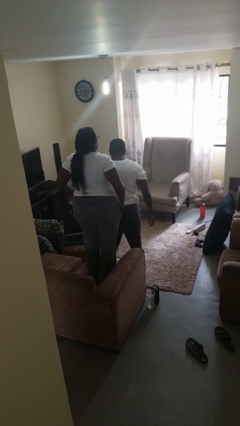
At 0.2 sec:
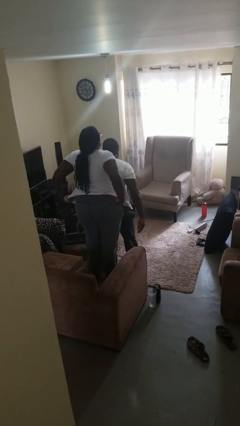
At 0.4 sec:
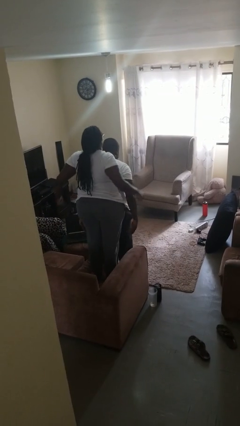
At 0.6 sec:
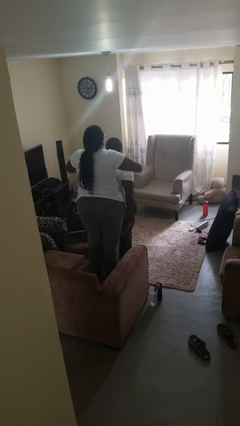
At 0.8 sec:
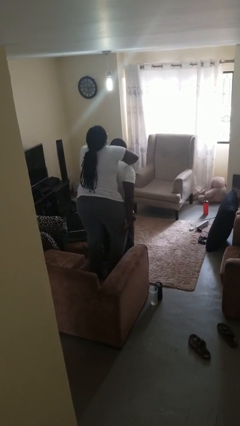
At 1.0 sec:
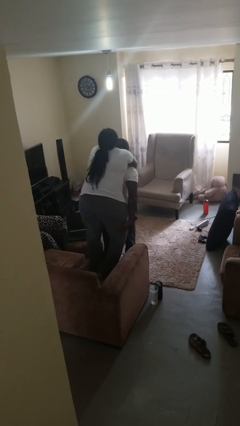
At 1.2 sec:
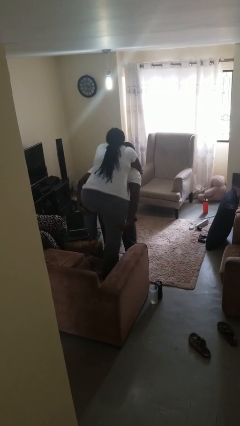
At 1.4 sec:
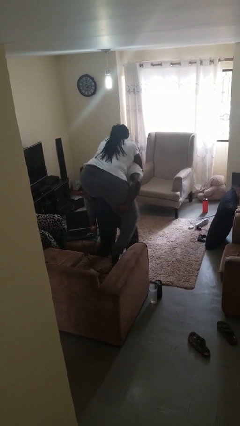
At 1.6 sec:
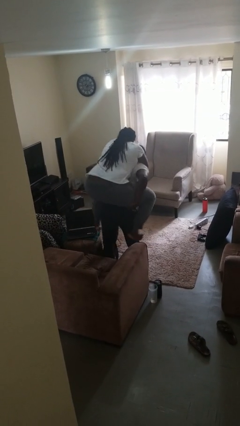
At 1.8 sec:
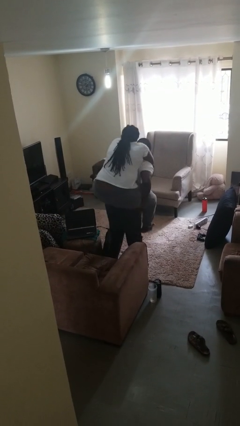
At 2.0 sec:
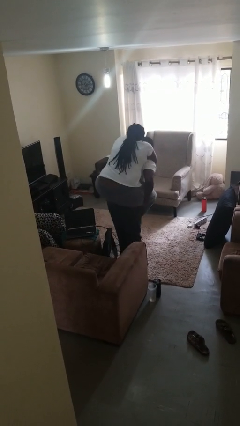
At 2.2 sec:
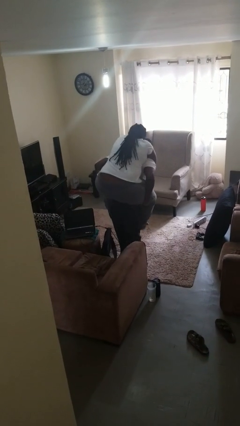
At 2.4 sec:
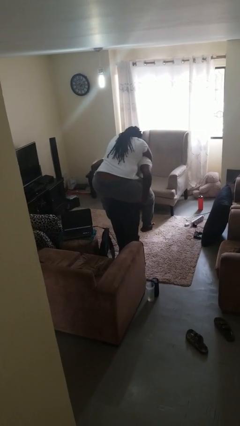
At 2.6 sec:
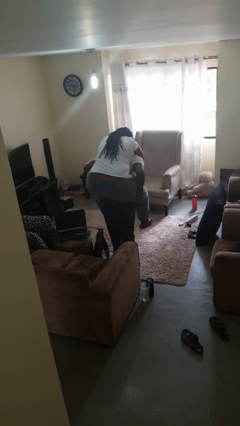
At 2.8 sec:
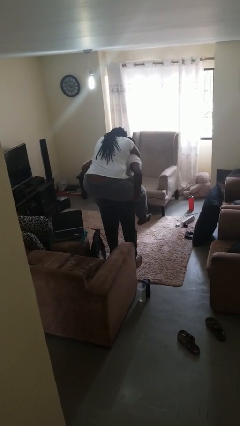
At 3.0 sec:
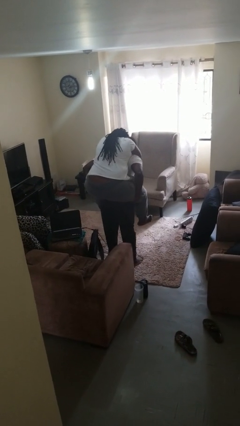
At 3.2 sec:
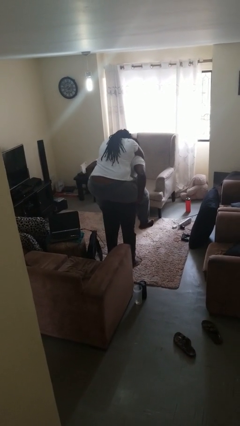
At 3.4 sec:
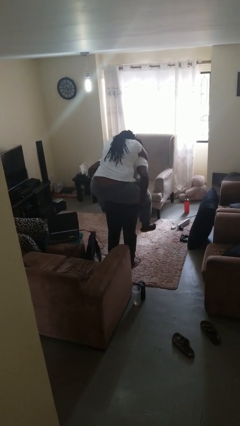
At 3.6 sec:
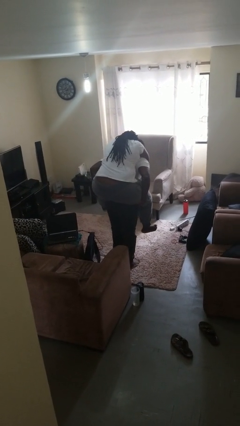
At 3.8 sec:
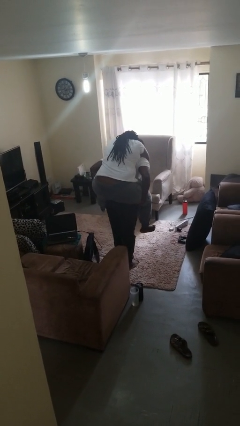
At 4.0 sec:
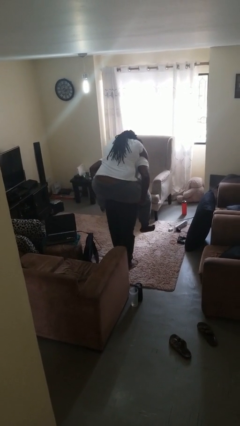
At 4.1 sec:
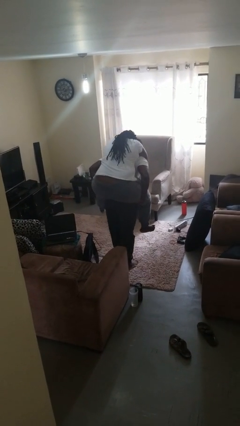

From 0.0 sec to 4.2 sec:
person carries person on back

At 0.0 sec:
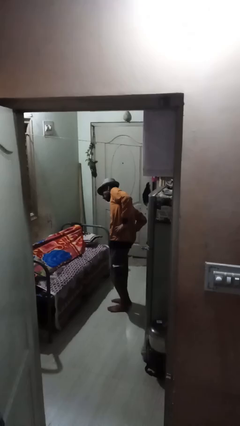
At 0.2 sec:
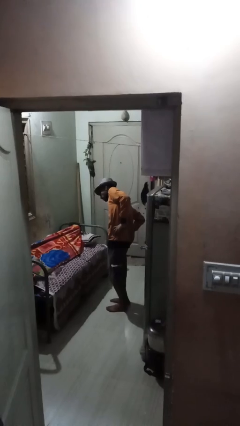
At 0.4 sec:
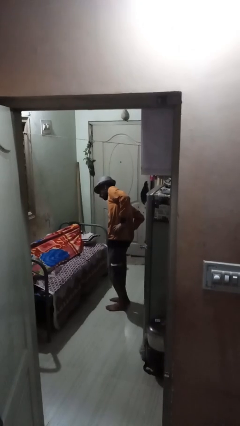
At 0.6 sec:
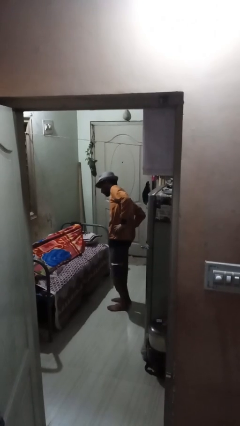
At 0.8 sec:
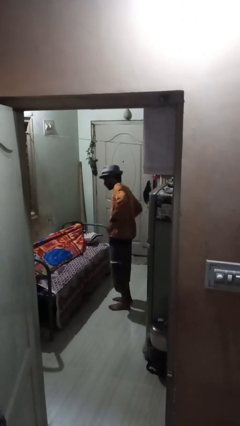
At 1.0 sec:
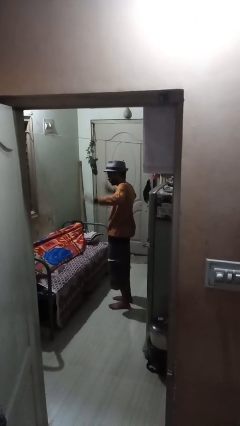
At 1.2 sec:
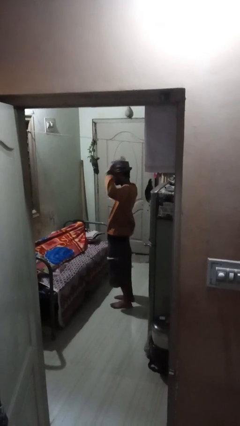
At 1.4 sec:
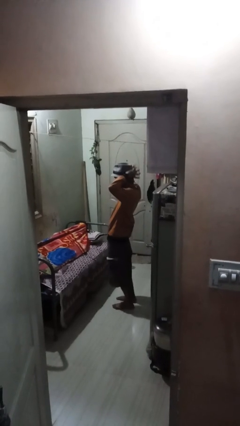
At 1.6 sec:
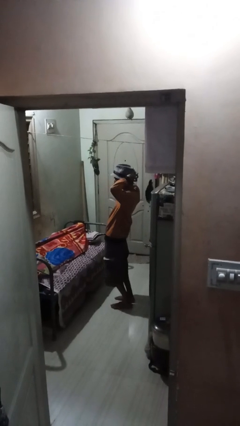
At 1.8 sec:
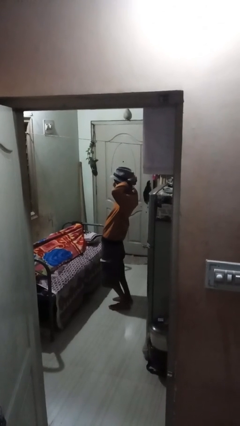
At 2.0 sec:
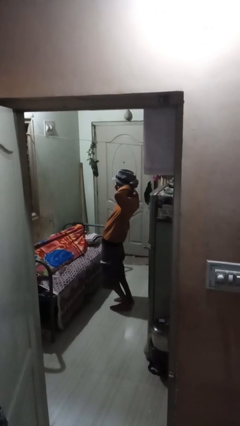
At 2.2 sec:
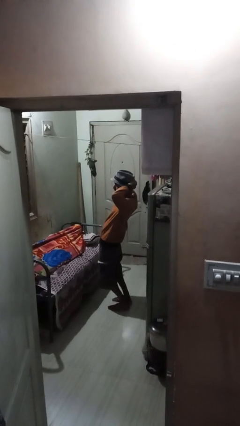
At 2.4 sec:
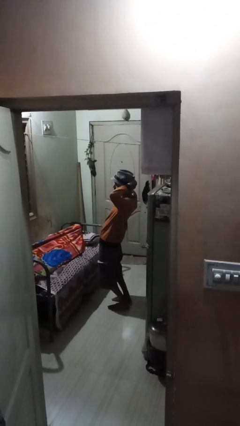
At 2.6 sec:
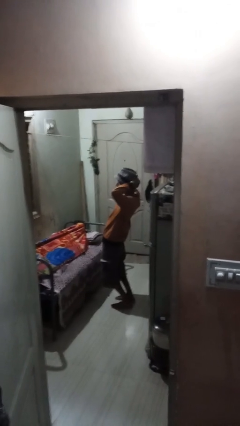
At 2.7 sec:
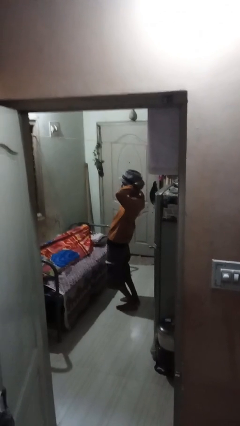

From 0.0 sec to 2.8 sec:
person stretches arms over head

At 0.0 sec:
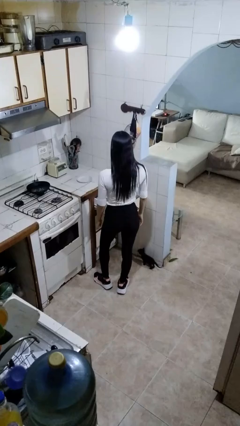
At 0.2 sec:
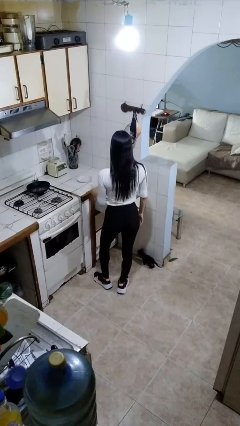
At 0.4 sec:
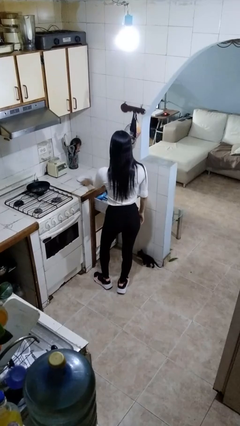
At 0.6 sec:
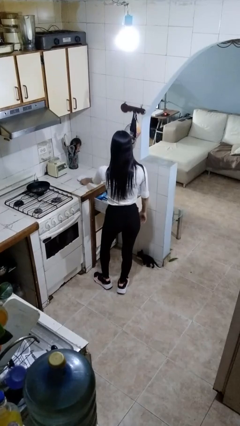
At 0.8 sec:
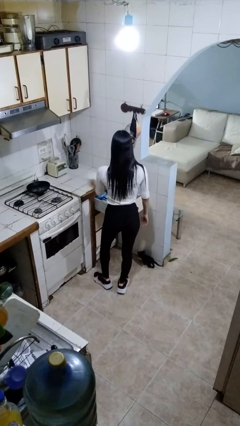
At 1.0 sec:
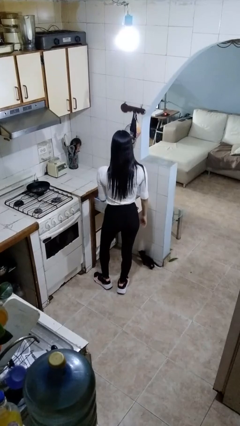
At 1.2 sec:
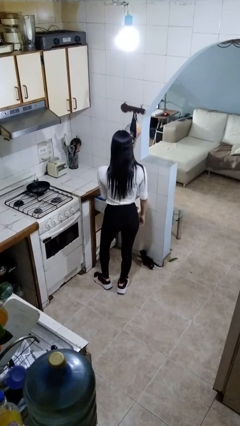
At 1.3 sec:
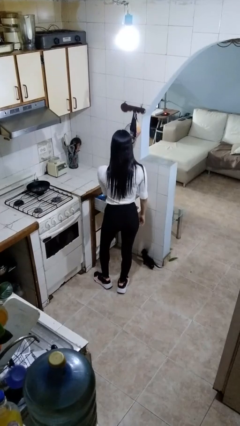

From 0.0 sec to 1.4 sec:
person puts object into kitchen drawer

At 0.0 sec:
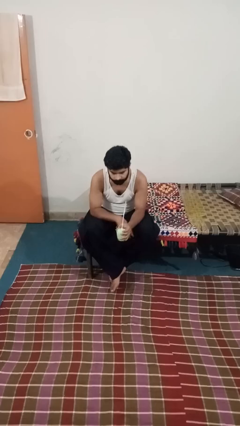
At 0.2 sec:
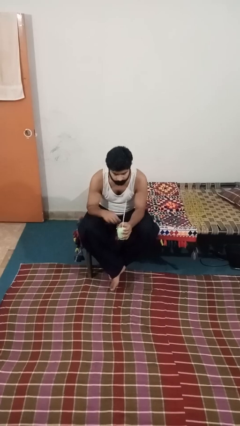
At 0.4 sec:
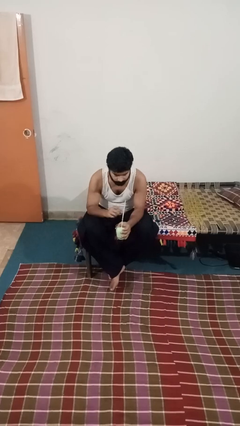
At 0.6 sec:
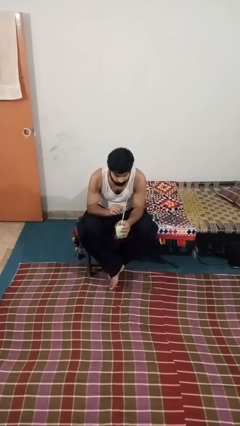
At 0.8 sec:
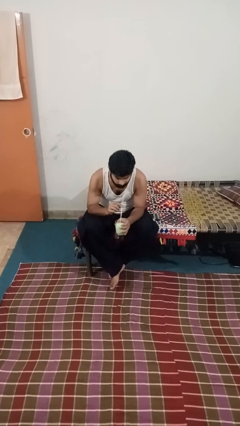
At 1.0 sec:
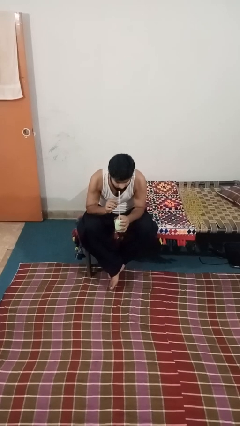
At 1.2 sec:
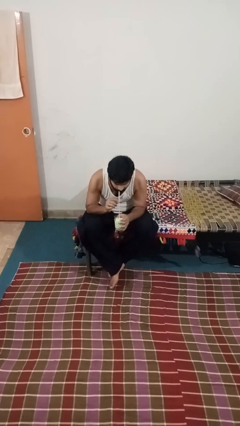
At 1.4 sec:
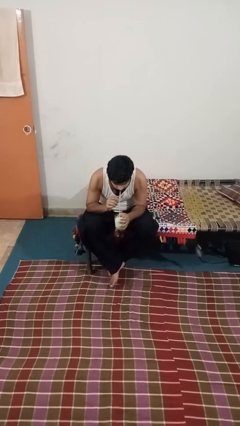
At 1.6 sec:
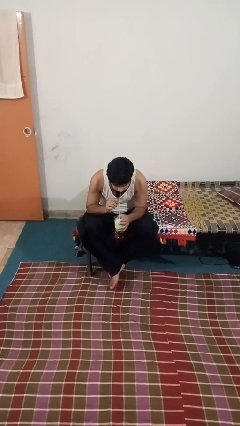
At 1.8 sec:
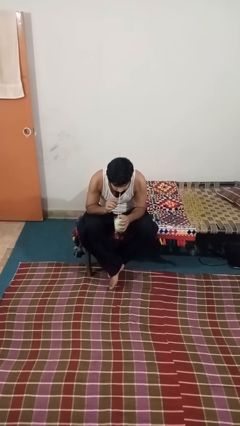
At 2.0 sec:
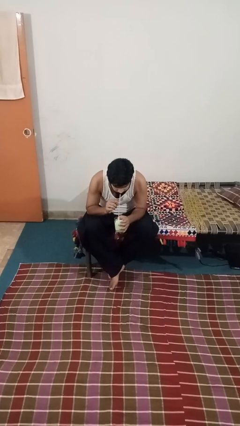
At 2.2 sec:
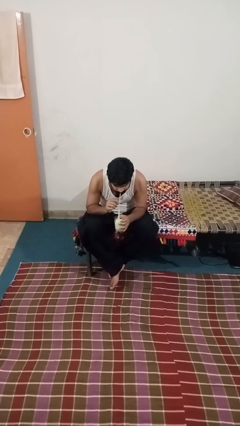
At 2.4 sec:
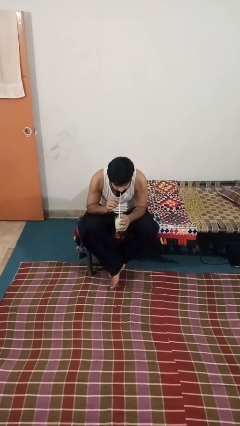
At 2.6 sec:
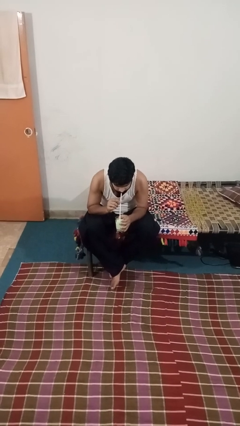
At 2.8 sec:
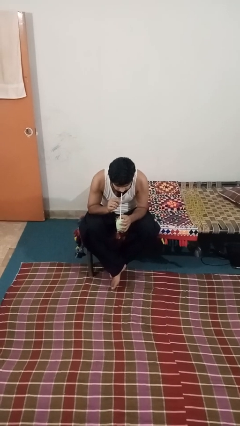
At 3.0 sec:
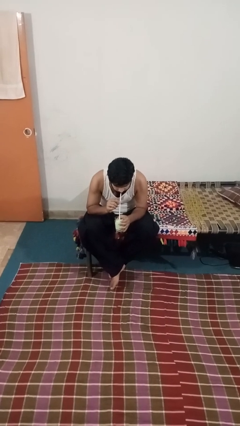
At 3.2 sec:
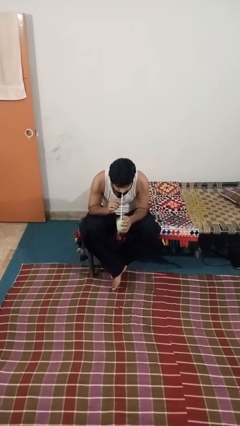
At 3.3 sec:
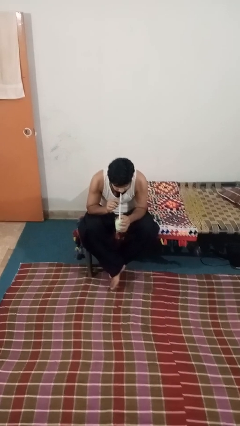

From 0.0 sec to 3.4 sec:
person drinks from straw

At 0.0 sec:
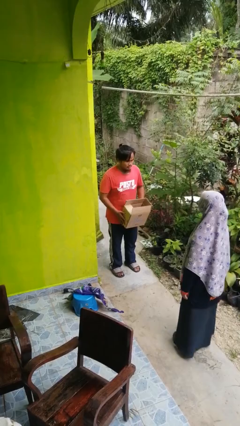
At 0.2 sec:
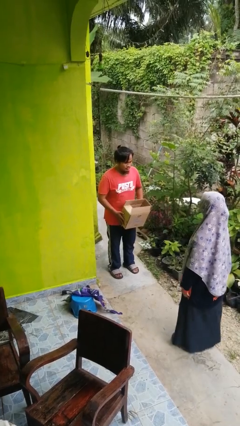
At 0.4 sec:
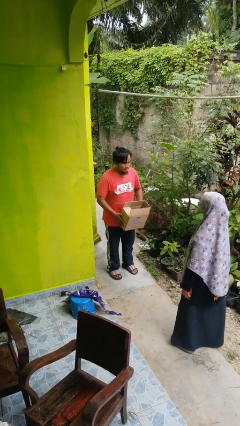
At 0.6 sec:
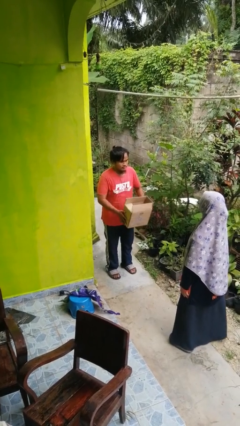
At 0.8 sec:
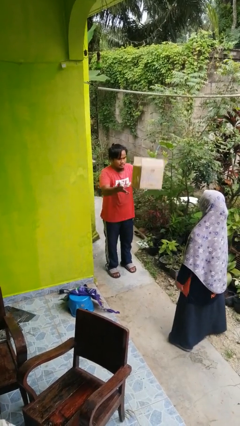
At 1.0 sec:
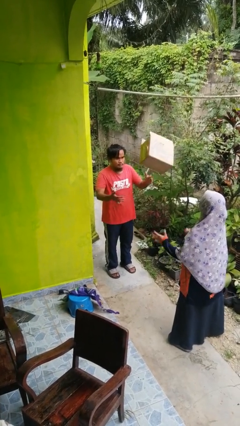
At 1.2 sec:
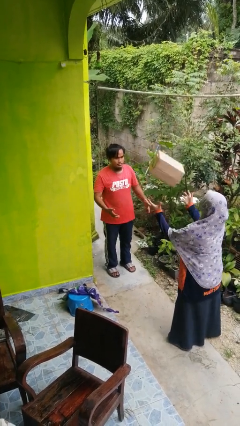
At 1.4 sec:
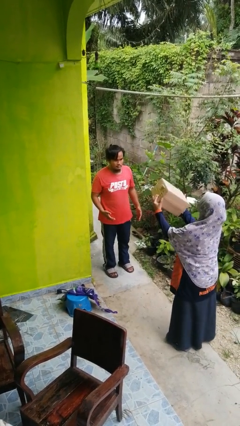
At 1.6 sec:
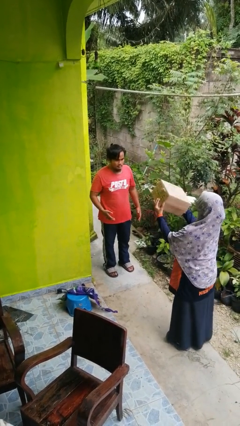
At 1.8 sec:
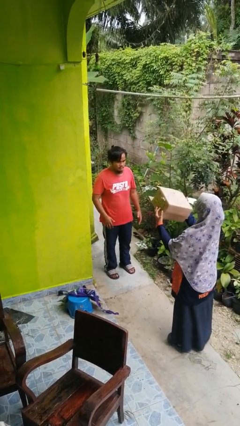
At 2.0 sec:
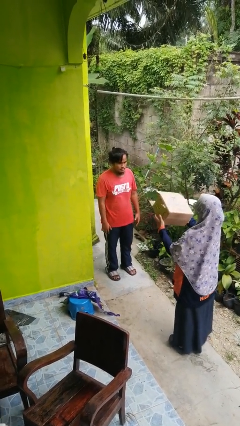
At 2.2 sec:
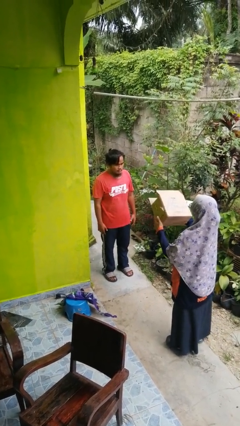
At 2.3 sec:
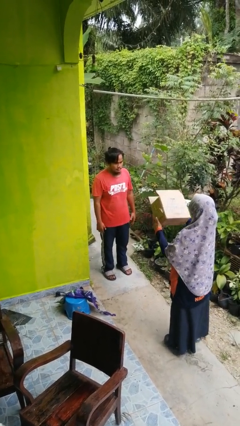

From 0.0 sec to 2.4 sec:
person throws object to person

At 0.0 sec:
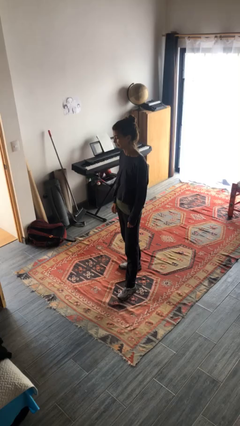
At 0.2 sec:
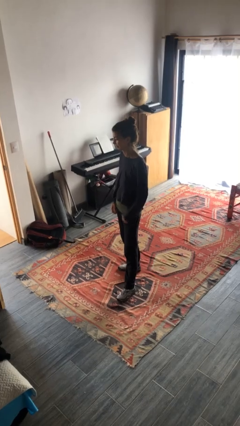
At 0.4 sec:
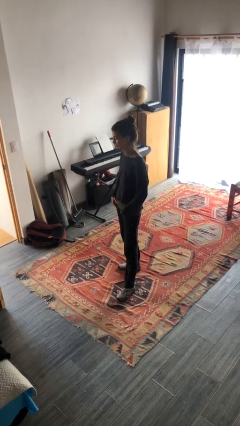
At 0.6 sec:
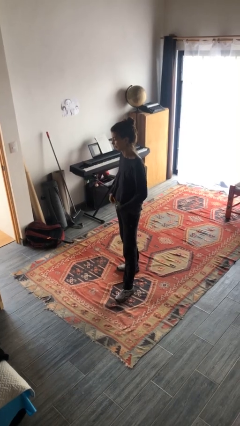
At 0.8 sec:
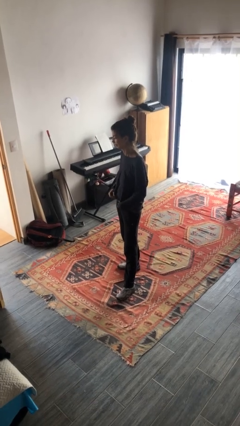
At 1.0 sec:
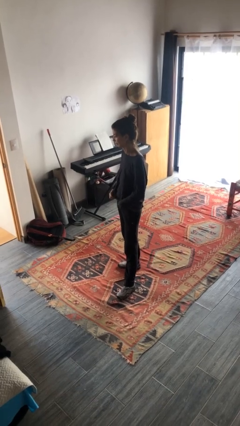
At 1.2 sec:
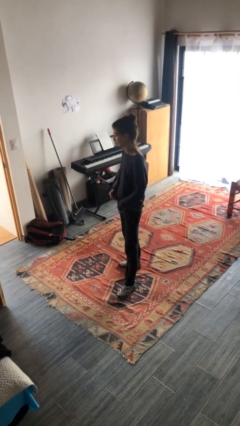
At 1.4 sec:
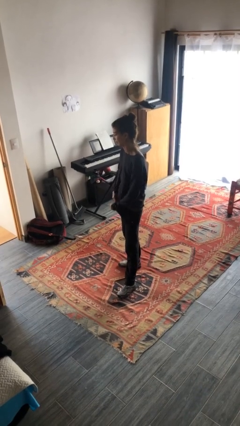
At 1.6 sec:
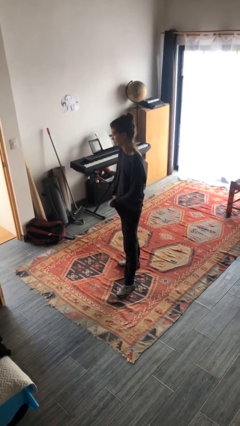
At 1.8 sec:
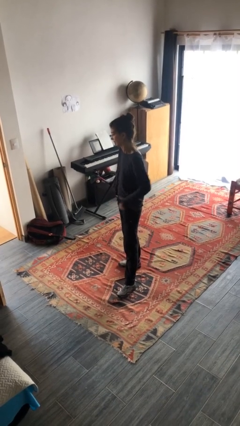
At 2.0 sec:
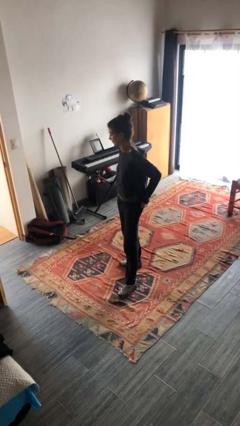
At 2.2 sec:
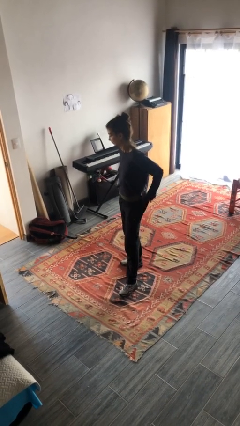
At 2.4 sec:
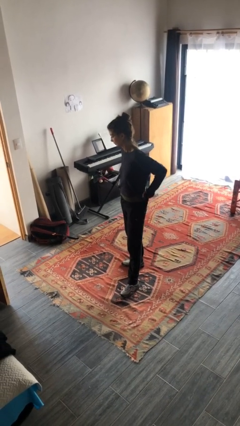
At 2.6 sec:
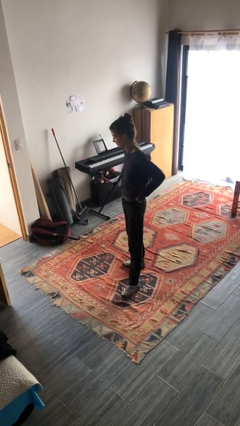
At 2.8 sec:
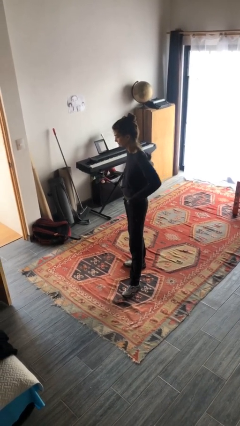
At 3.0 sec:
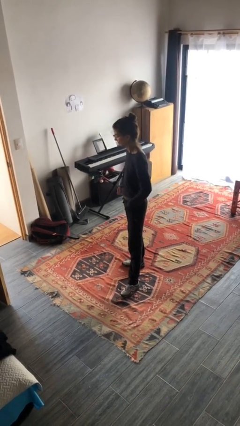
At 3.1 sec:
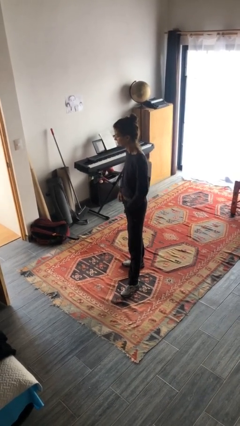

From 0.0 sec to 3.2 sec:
person tucks in shirt
